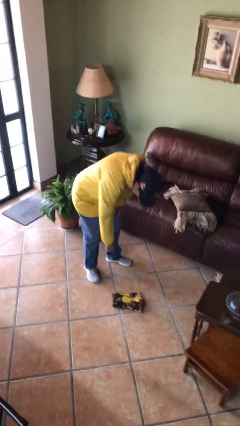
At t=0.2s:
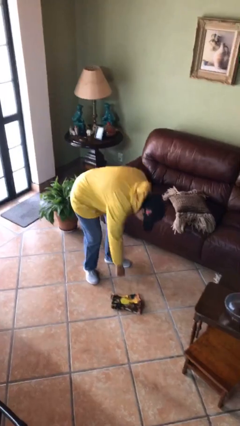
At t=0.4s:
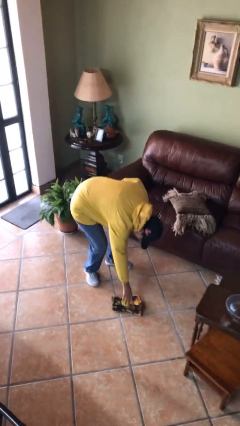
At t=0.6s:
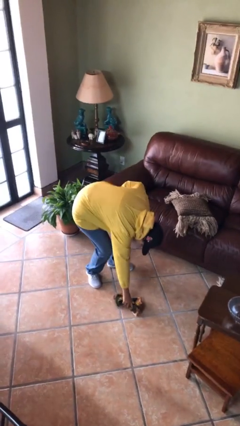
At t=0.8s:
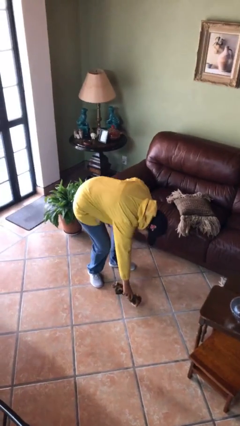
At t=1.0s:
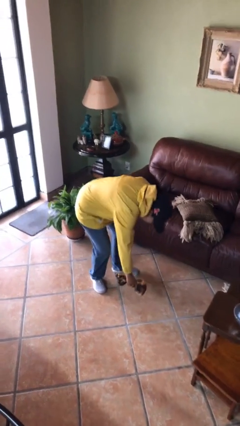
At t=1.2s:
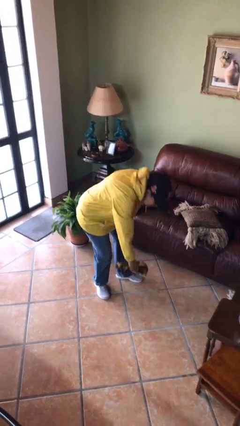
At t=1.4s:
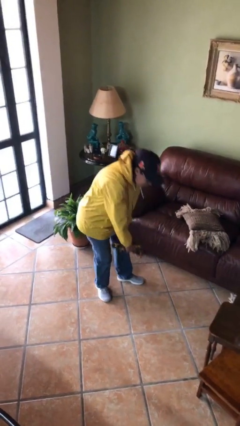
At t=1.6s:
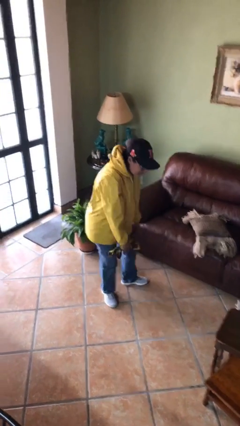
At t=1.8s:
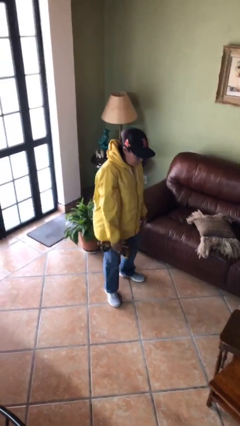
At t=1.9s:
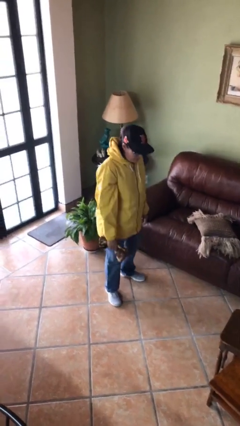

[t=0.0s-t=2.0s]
person picks up object from floor

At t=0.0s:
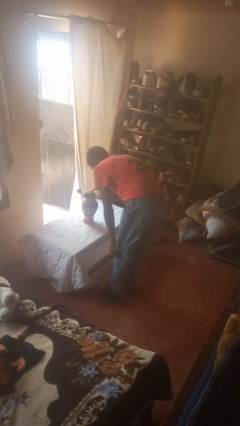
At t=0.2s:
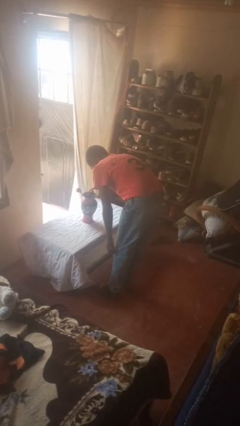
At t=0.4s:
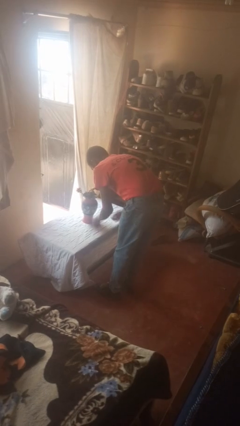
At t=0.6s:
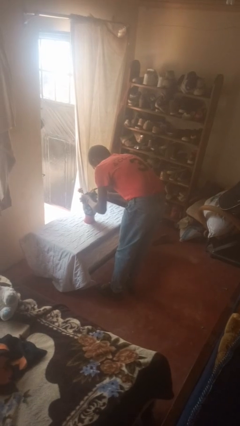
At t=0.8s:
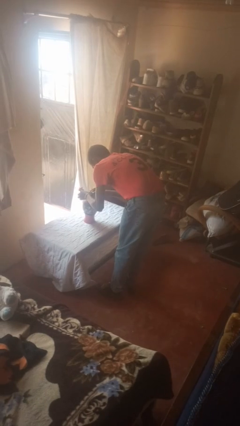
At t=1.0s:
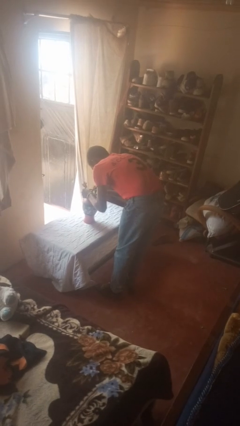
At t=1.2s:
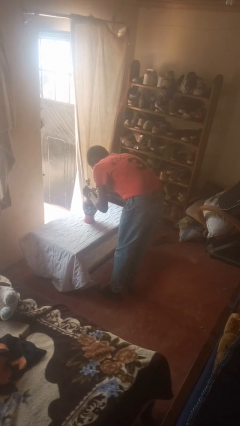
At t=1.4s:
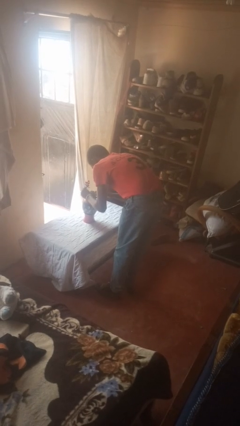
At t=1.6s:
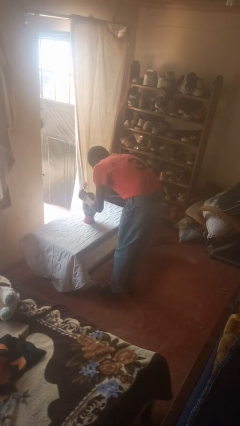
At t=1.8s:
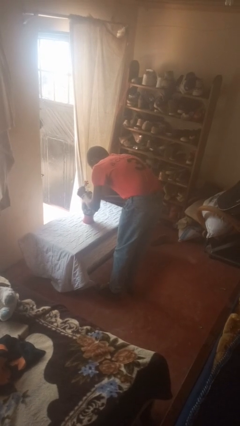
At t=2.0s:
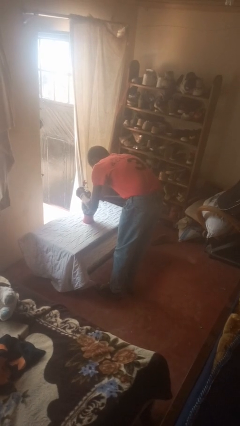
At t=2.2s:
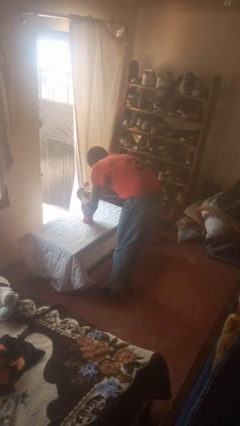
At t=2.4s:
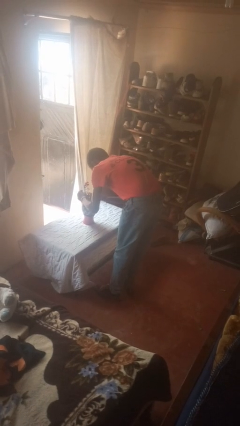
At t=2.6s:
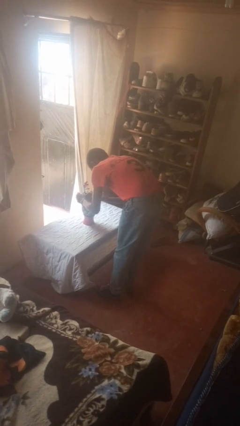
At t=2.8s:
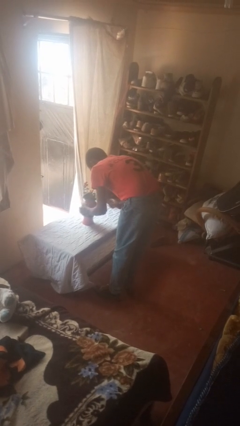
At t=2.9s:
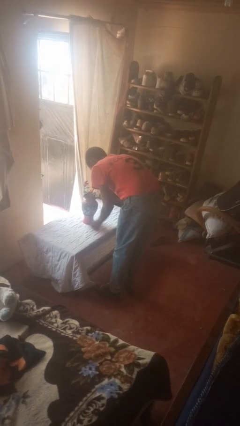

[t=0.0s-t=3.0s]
person arranges flowers in vase

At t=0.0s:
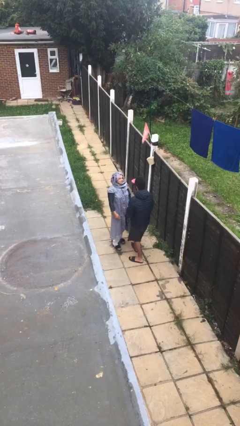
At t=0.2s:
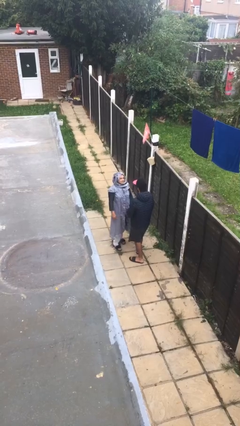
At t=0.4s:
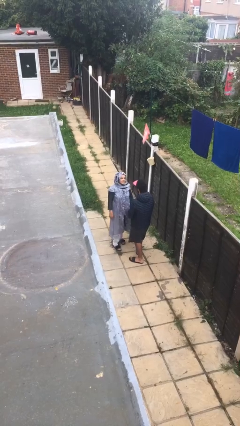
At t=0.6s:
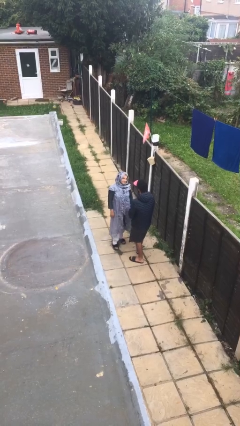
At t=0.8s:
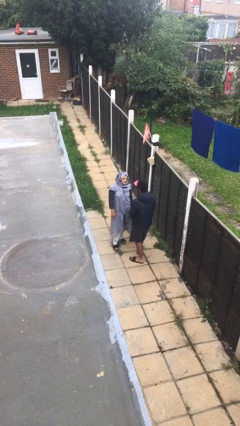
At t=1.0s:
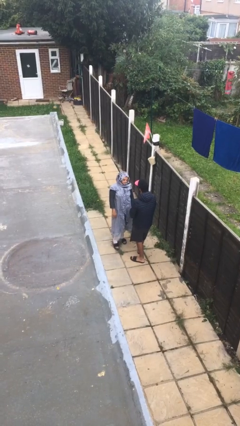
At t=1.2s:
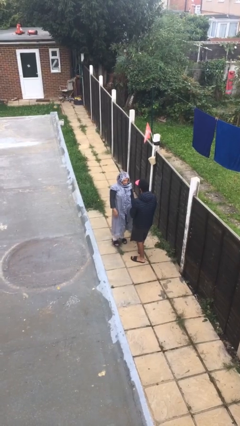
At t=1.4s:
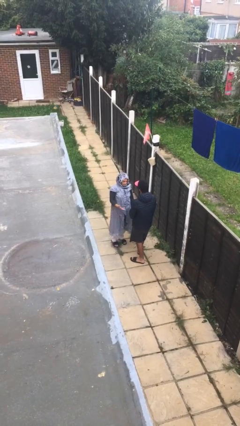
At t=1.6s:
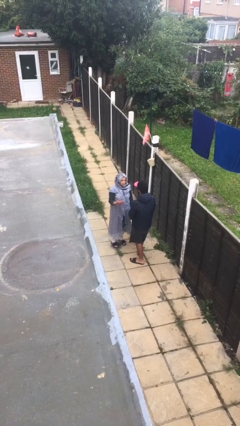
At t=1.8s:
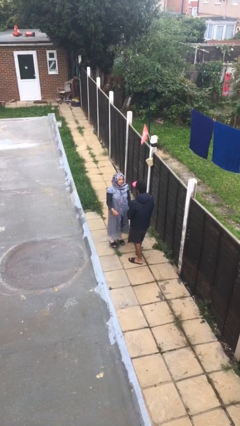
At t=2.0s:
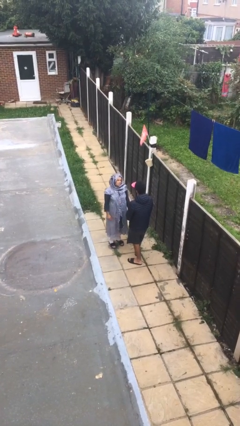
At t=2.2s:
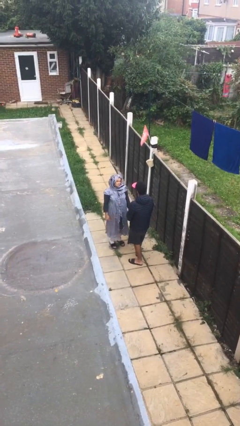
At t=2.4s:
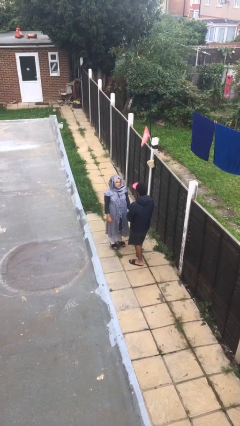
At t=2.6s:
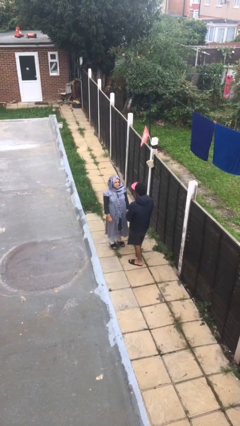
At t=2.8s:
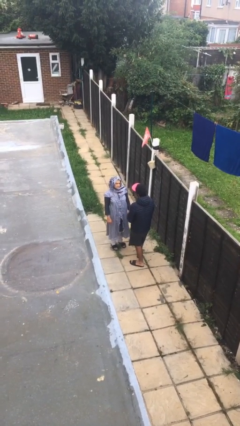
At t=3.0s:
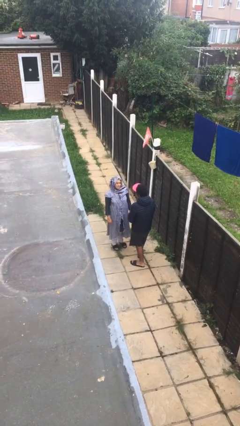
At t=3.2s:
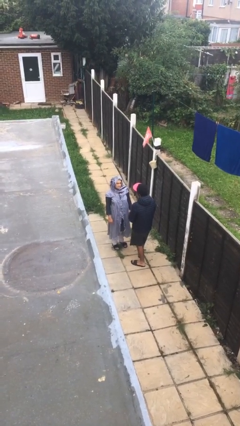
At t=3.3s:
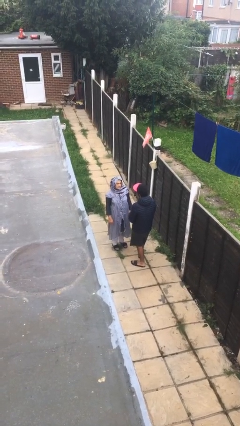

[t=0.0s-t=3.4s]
person talks to person

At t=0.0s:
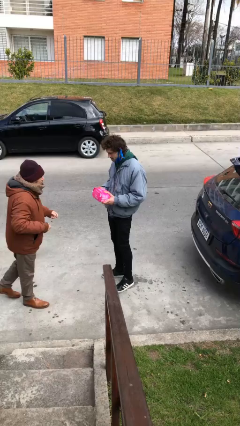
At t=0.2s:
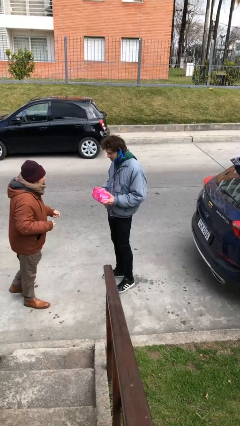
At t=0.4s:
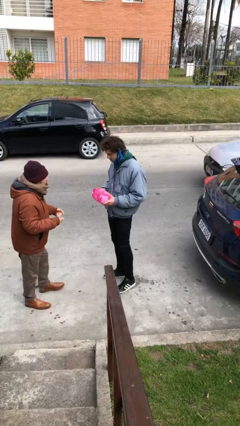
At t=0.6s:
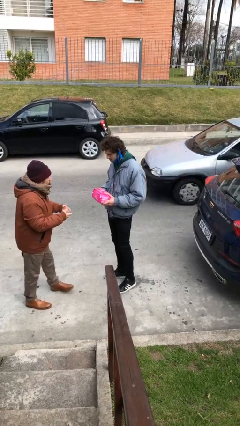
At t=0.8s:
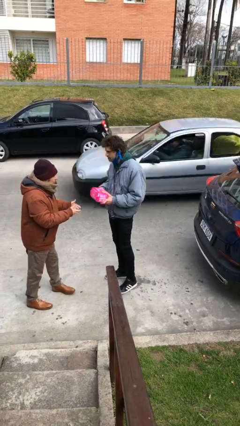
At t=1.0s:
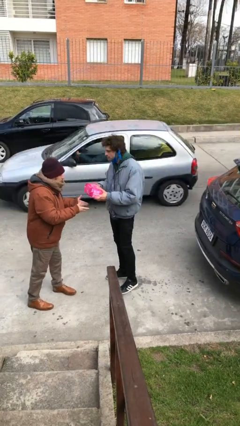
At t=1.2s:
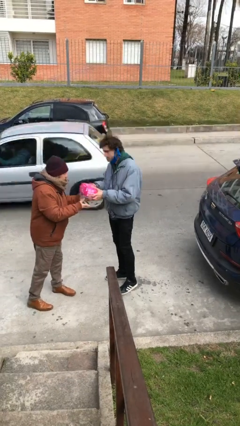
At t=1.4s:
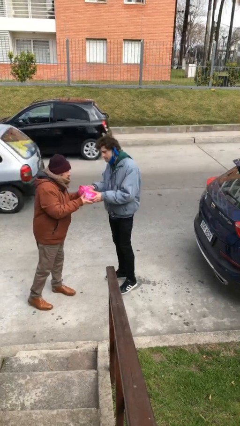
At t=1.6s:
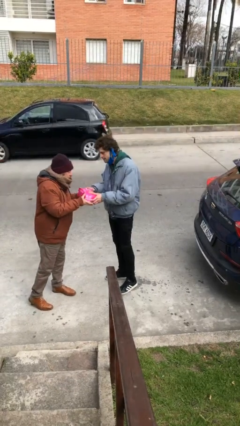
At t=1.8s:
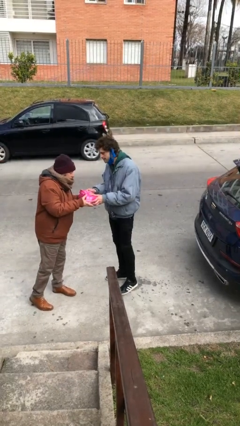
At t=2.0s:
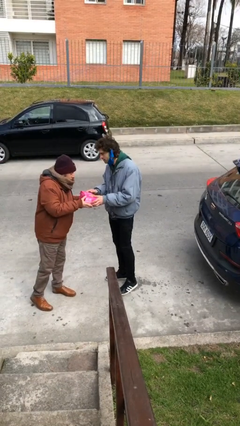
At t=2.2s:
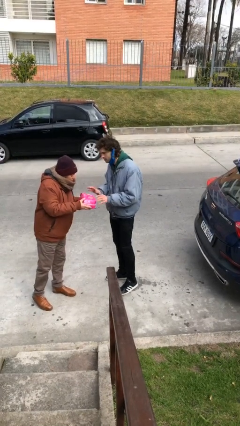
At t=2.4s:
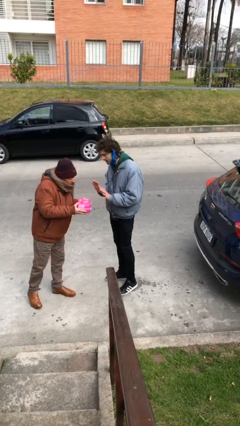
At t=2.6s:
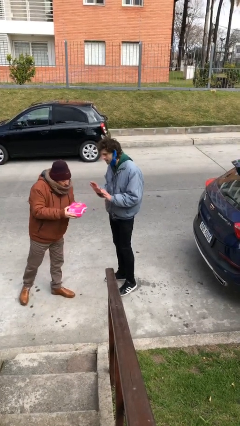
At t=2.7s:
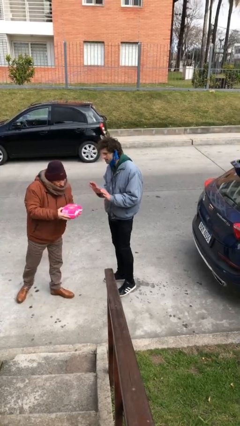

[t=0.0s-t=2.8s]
person transfers object to person

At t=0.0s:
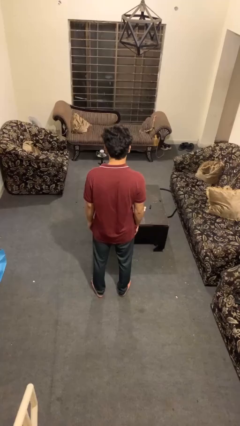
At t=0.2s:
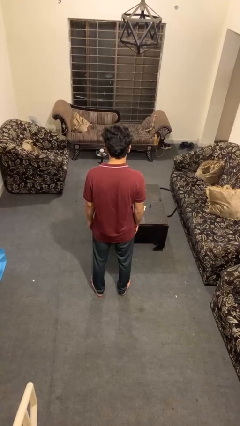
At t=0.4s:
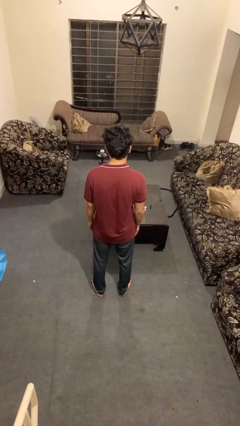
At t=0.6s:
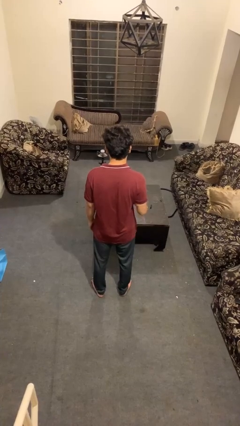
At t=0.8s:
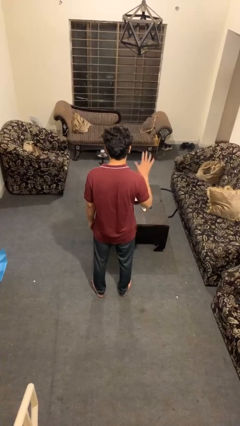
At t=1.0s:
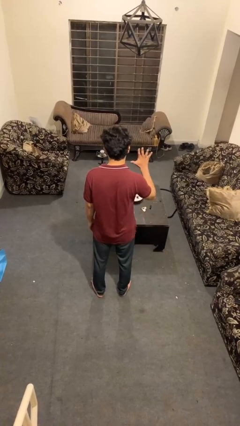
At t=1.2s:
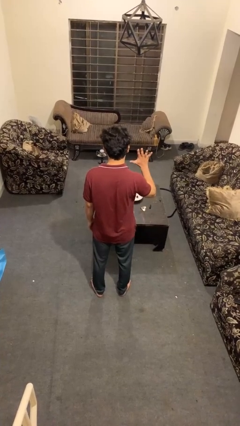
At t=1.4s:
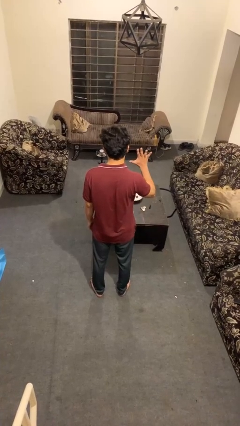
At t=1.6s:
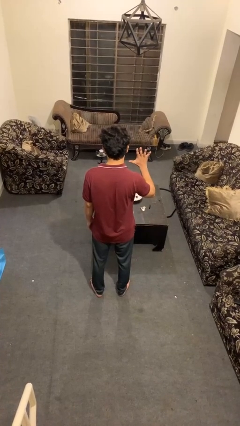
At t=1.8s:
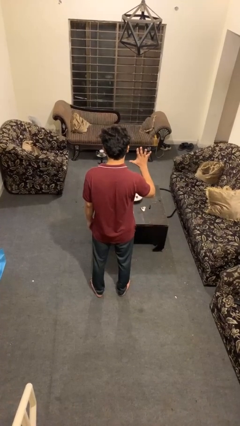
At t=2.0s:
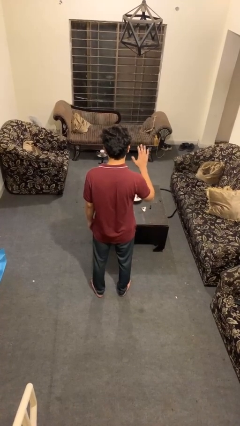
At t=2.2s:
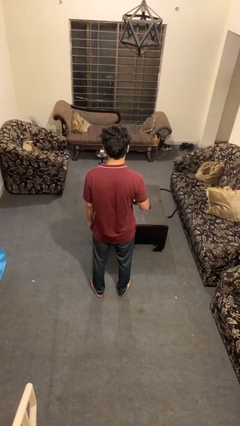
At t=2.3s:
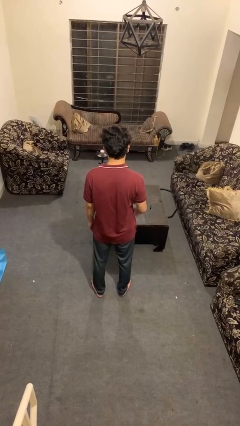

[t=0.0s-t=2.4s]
person gestures number five

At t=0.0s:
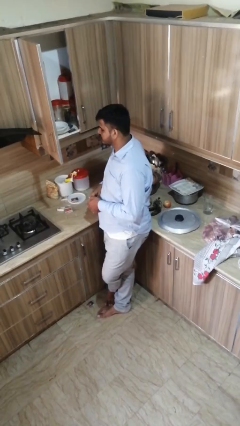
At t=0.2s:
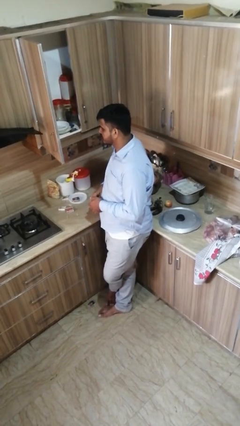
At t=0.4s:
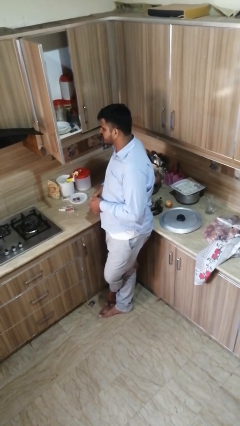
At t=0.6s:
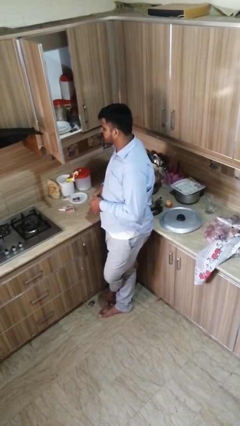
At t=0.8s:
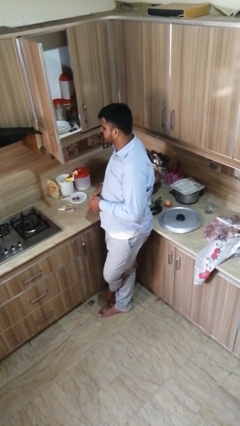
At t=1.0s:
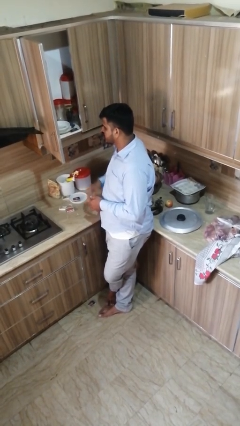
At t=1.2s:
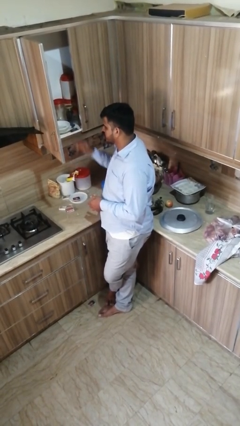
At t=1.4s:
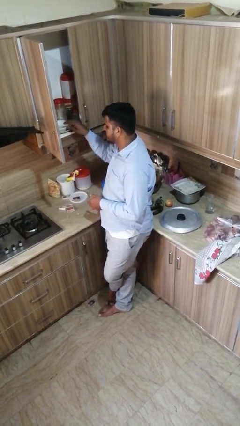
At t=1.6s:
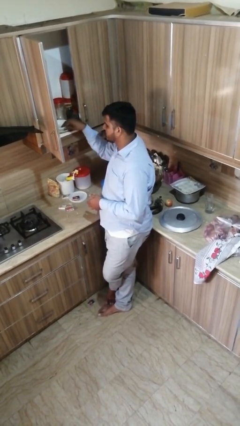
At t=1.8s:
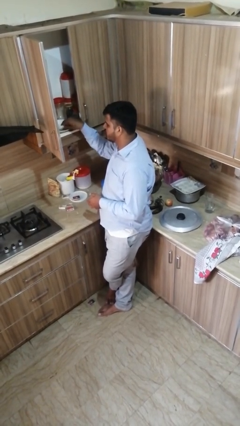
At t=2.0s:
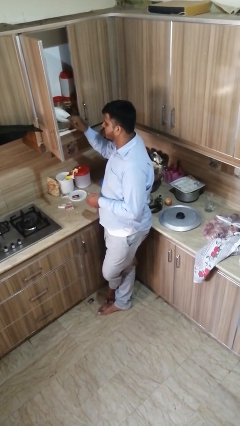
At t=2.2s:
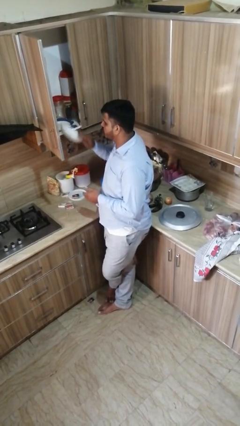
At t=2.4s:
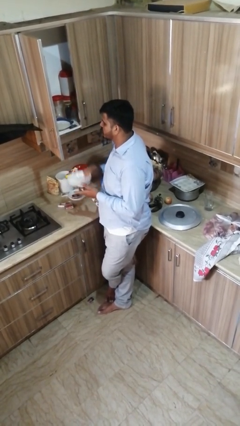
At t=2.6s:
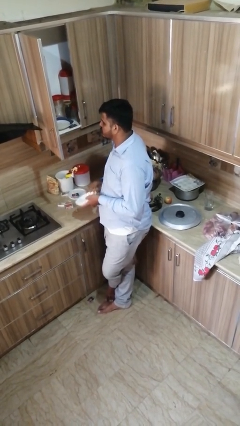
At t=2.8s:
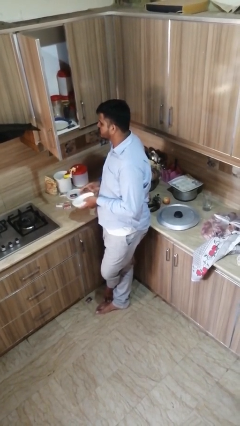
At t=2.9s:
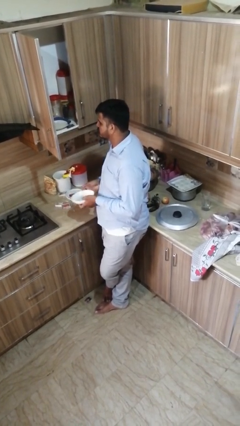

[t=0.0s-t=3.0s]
person takes object from cabinet
